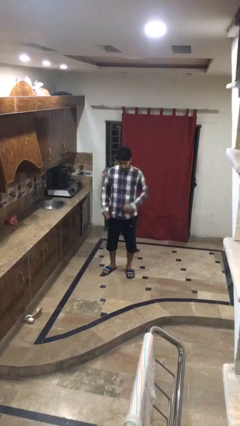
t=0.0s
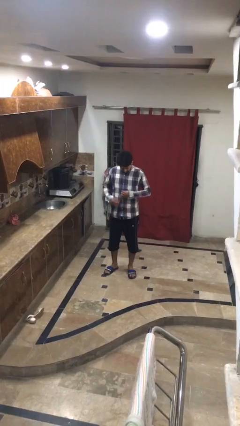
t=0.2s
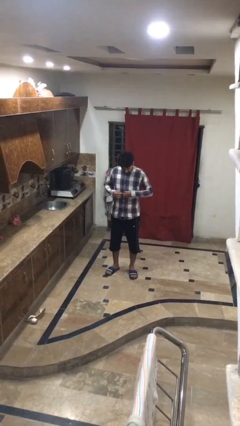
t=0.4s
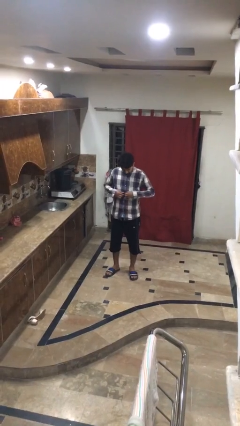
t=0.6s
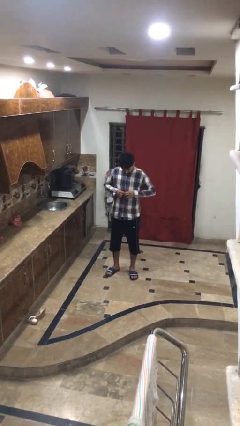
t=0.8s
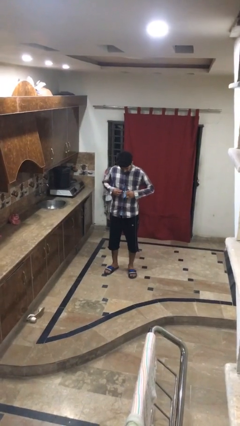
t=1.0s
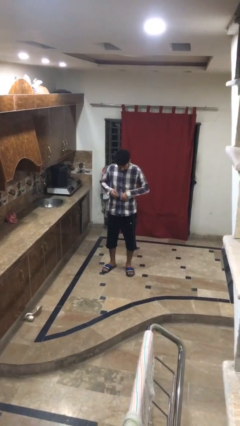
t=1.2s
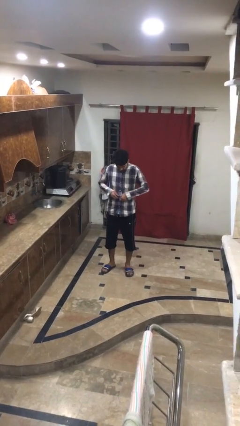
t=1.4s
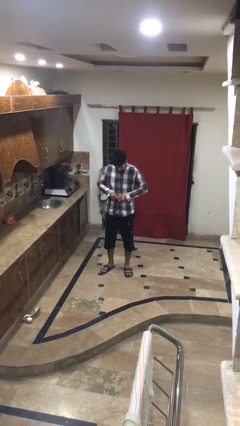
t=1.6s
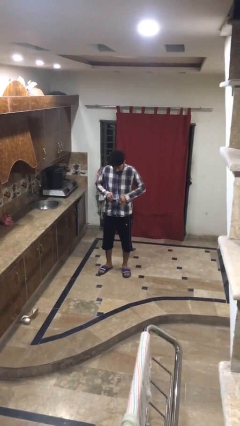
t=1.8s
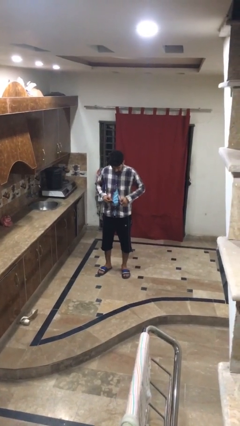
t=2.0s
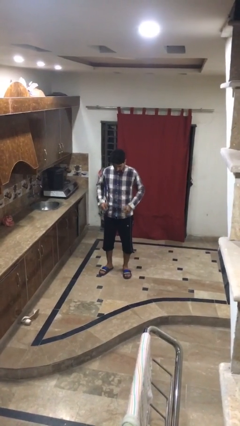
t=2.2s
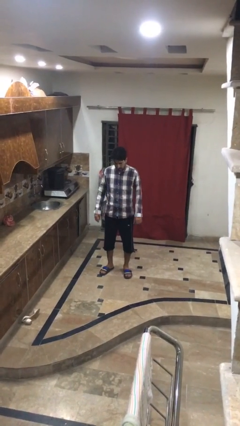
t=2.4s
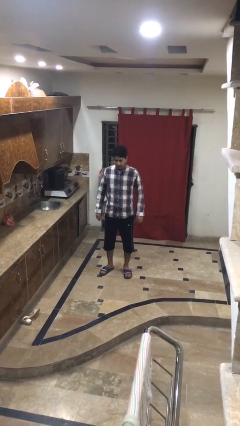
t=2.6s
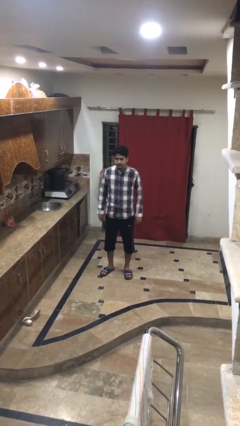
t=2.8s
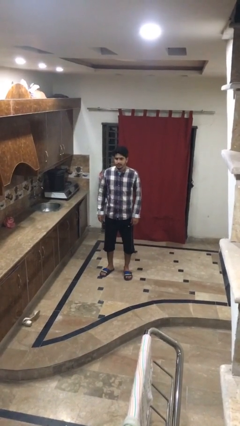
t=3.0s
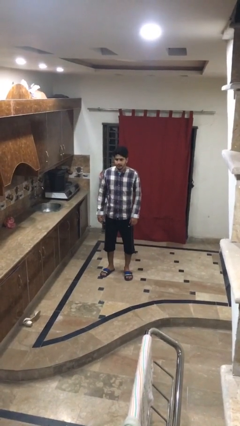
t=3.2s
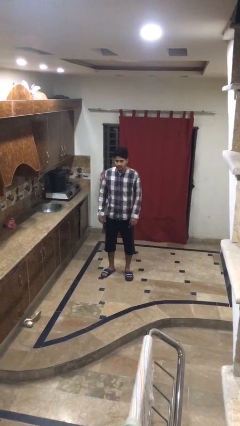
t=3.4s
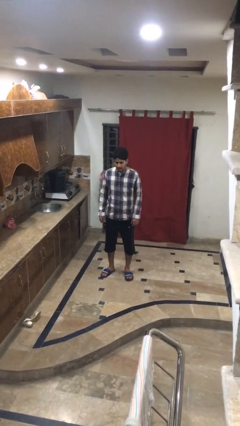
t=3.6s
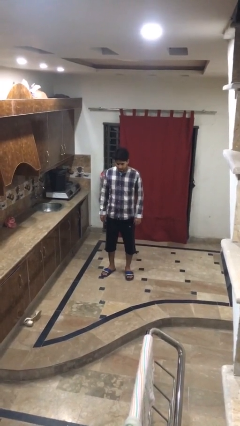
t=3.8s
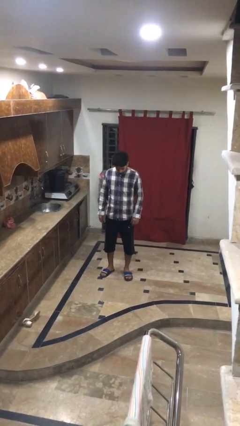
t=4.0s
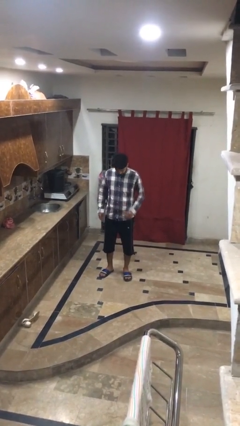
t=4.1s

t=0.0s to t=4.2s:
person unbuttons shirt

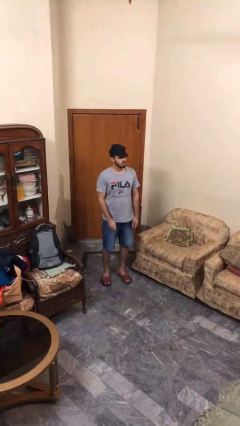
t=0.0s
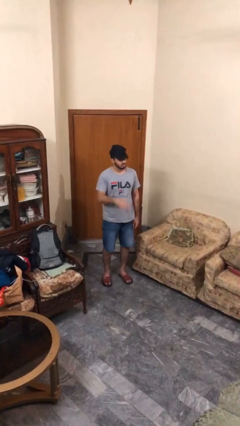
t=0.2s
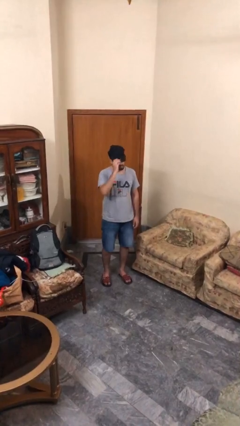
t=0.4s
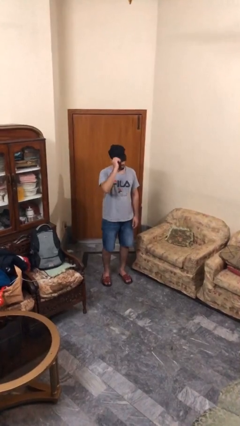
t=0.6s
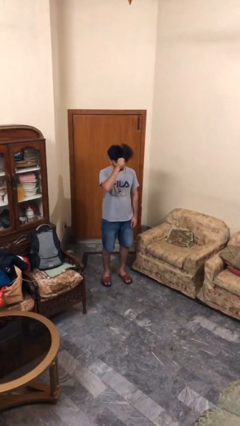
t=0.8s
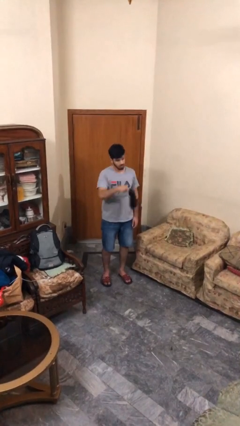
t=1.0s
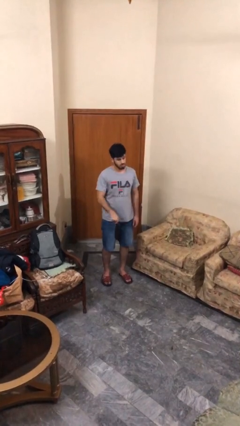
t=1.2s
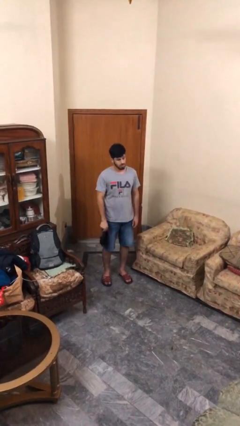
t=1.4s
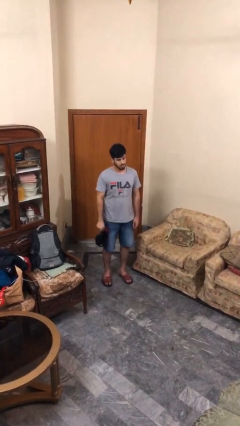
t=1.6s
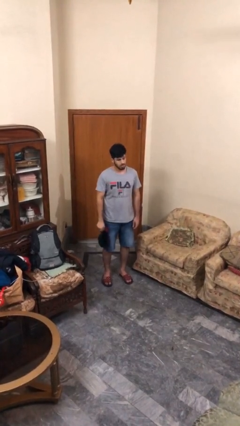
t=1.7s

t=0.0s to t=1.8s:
person takes off hat

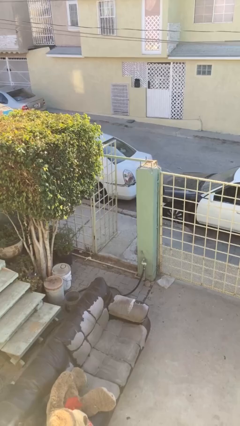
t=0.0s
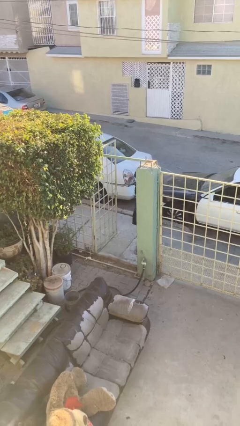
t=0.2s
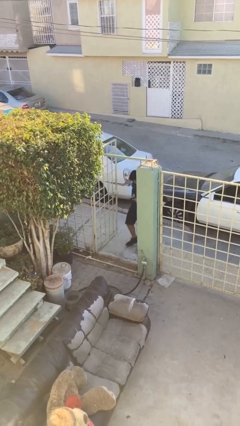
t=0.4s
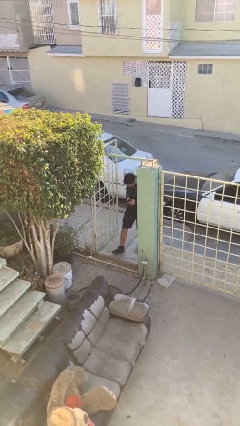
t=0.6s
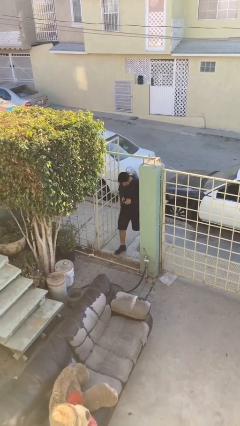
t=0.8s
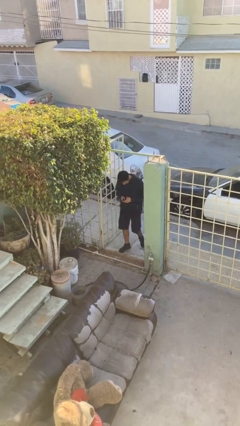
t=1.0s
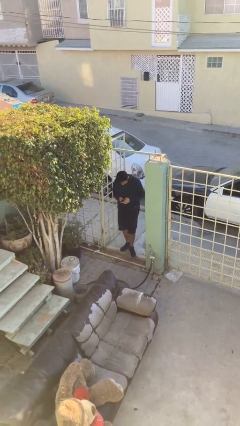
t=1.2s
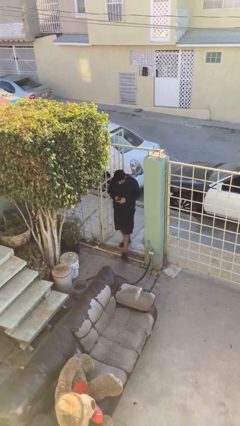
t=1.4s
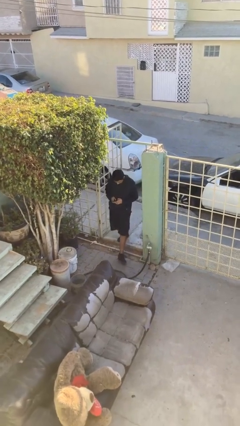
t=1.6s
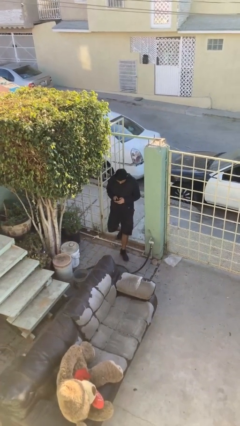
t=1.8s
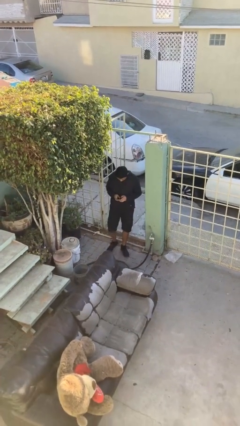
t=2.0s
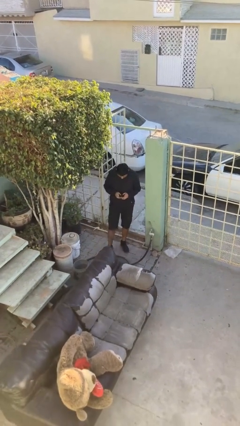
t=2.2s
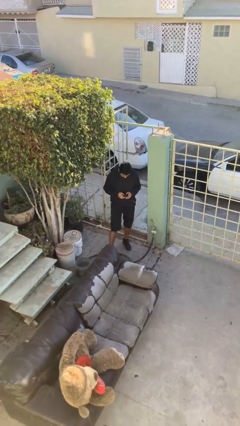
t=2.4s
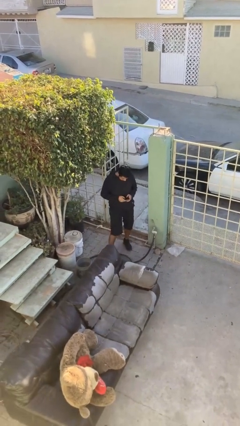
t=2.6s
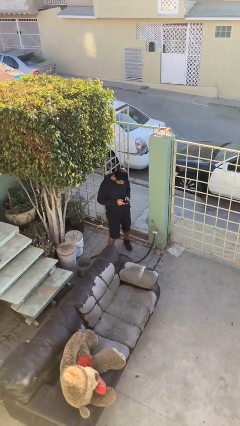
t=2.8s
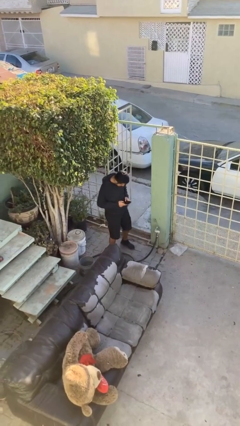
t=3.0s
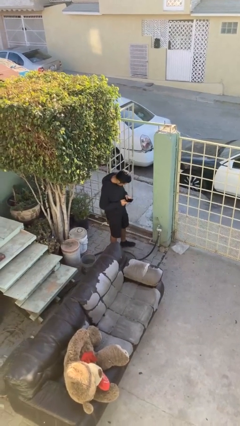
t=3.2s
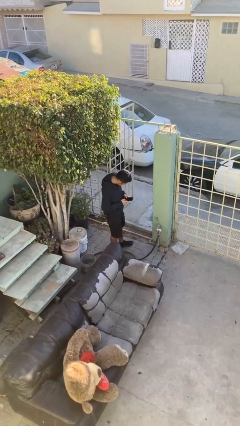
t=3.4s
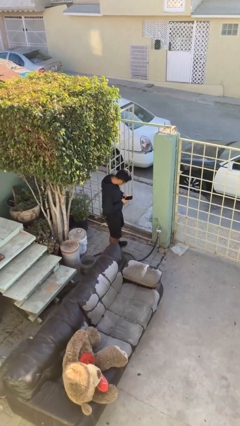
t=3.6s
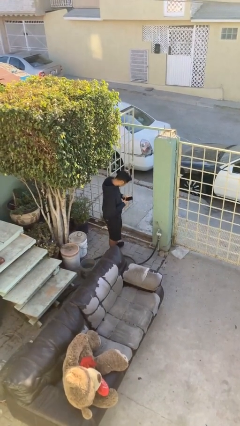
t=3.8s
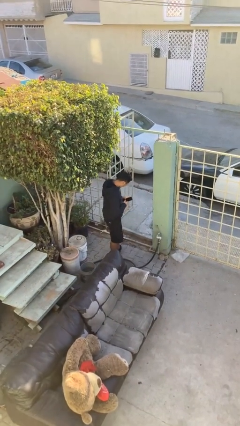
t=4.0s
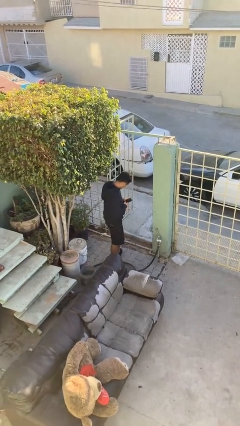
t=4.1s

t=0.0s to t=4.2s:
person enters scene through structure

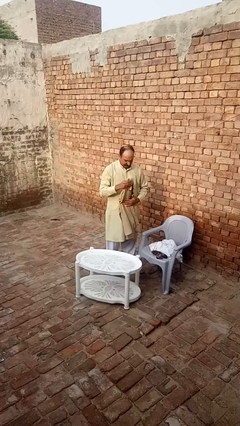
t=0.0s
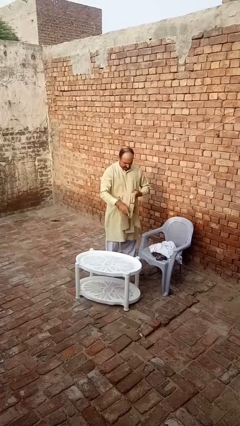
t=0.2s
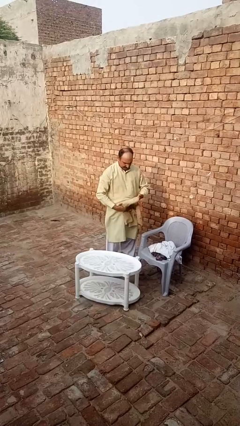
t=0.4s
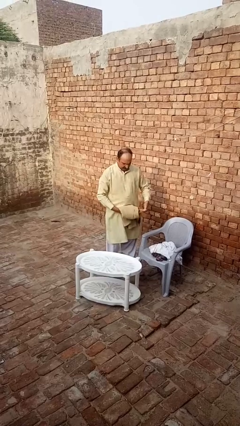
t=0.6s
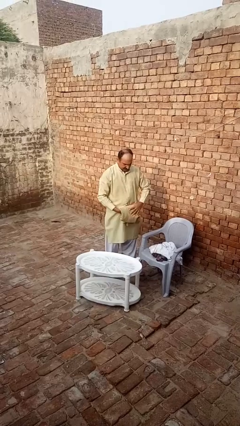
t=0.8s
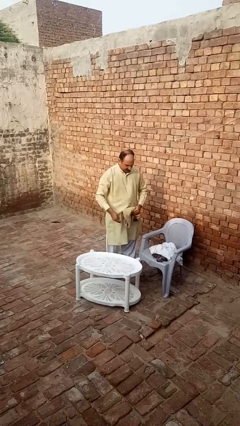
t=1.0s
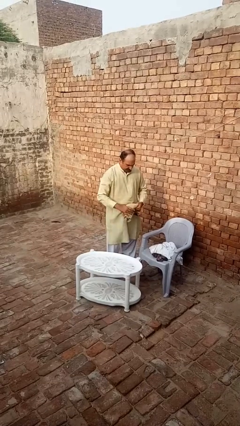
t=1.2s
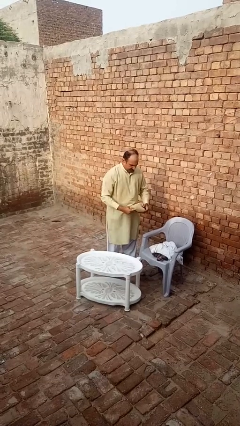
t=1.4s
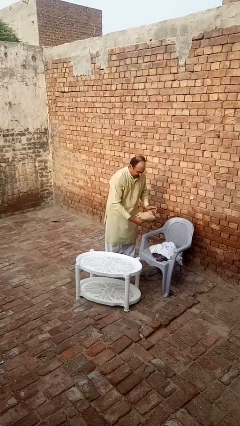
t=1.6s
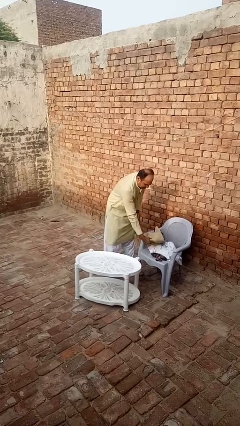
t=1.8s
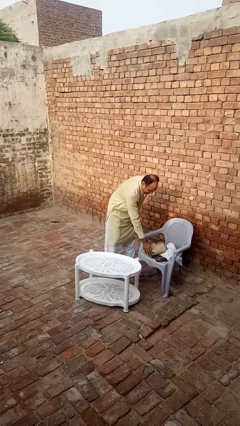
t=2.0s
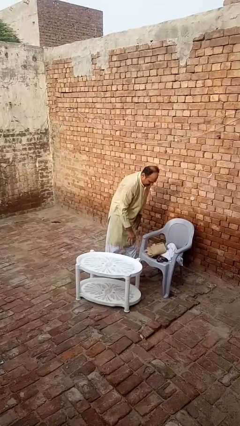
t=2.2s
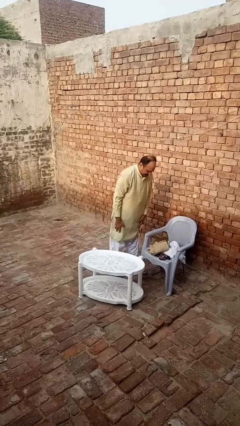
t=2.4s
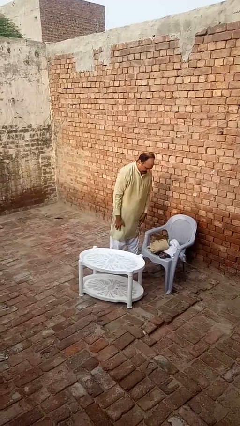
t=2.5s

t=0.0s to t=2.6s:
person folds shirt

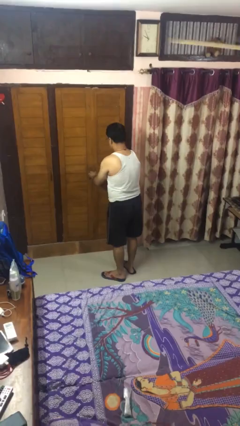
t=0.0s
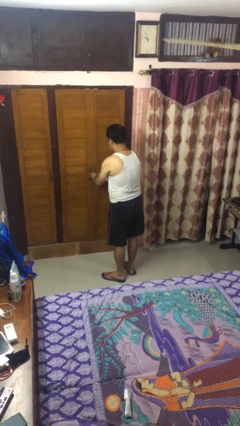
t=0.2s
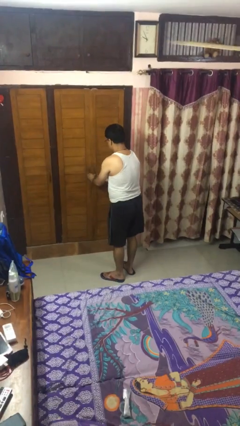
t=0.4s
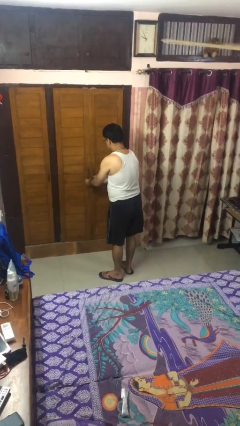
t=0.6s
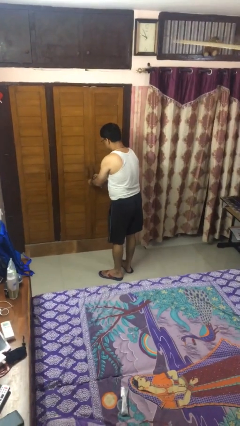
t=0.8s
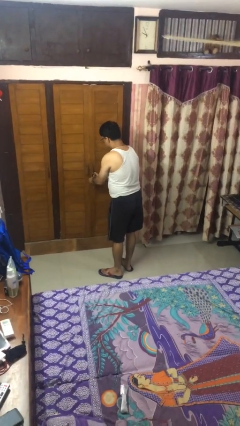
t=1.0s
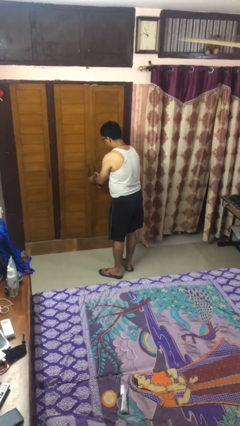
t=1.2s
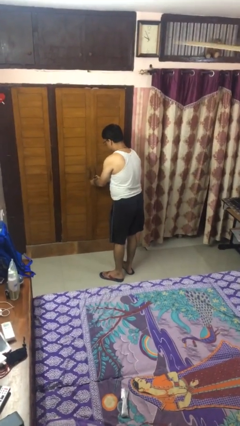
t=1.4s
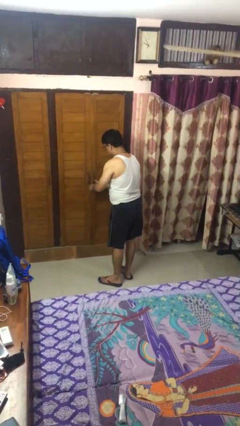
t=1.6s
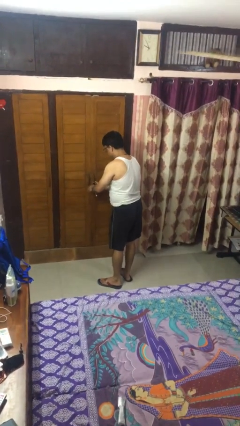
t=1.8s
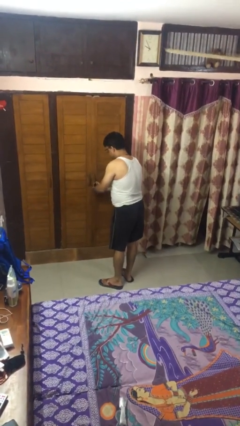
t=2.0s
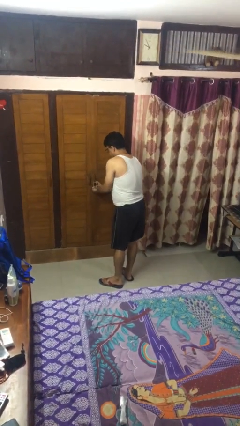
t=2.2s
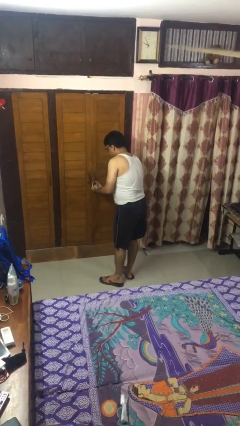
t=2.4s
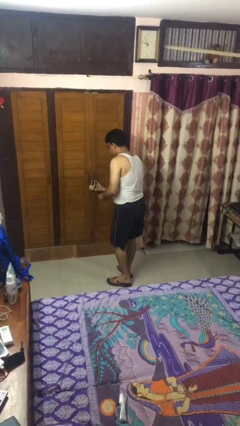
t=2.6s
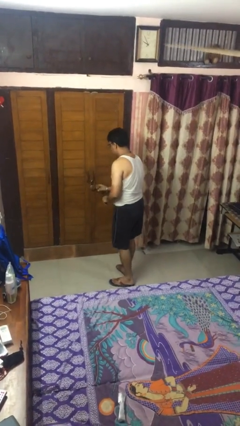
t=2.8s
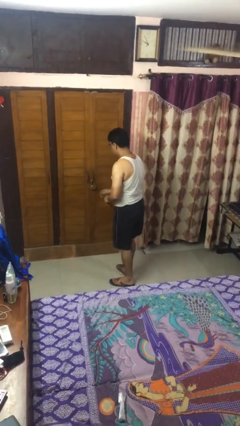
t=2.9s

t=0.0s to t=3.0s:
person locks door with keys

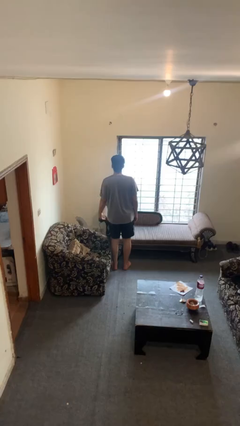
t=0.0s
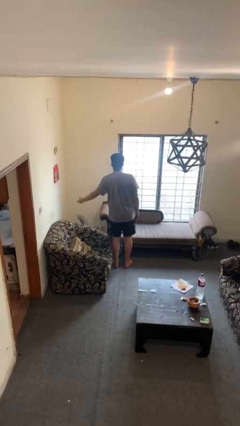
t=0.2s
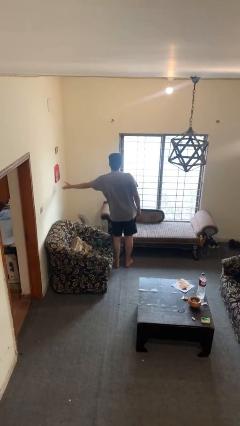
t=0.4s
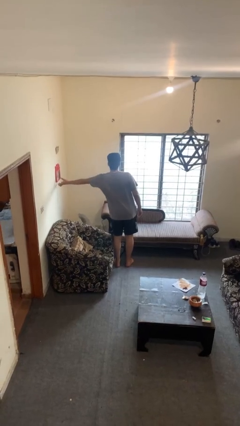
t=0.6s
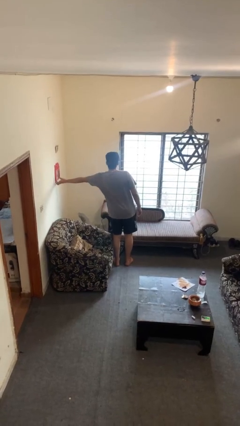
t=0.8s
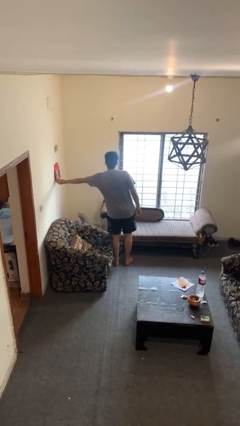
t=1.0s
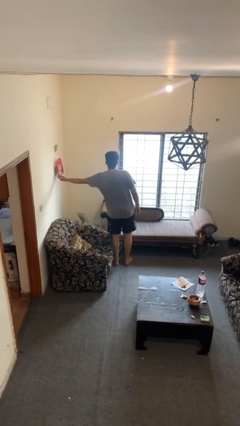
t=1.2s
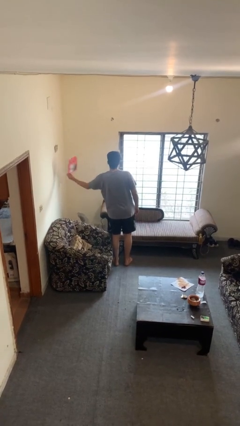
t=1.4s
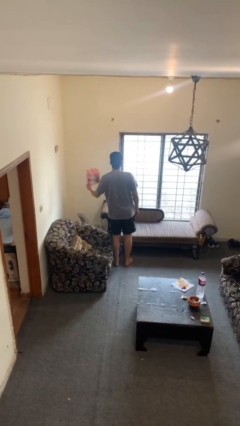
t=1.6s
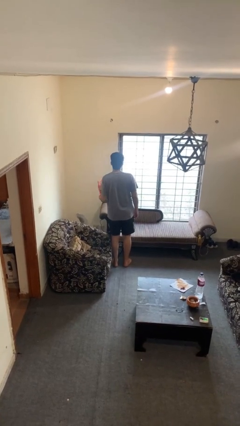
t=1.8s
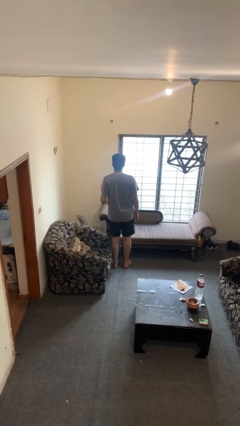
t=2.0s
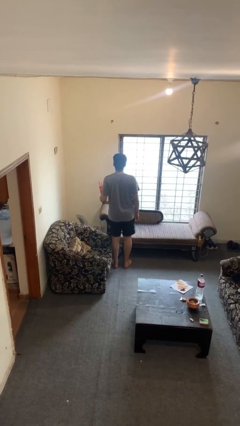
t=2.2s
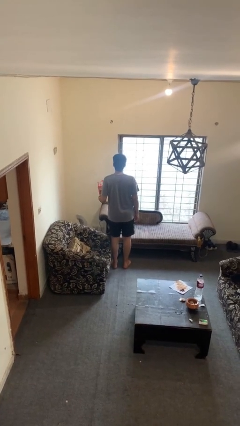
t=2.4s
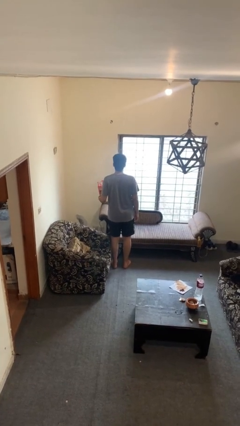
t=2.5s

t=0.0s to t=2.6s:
person takes down picture frame
